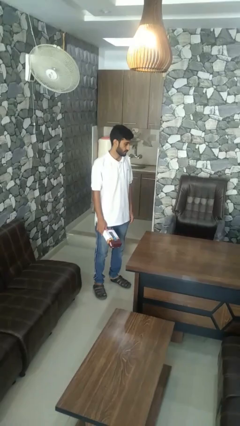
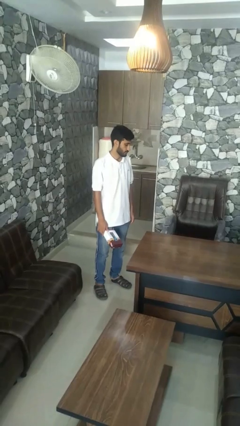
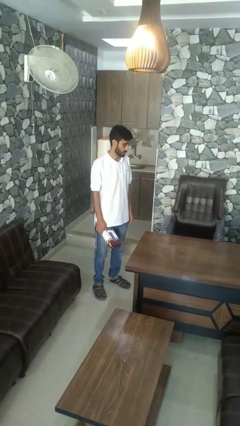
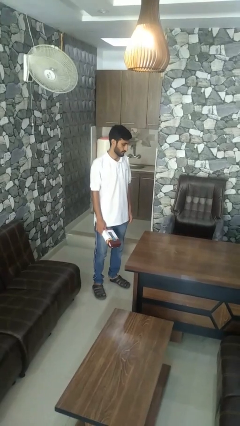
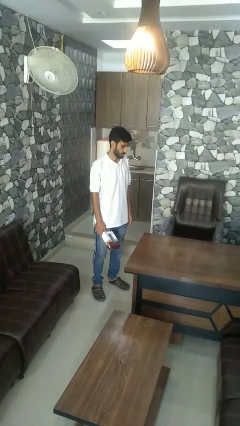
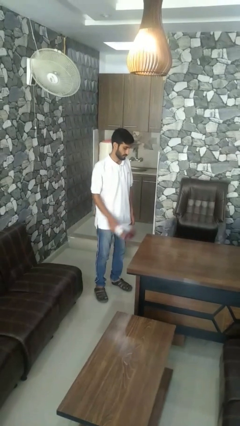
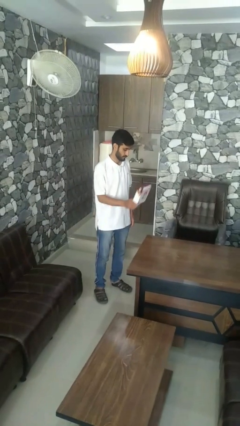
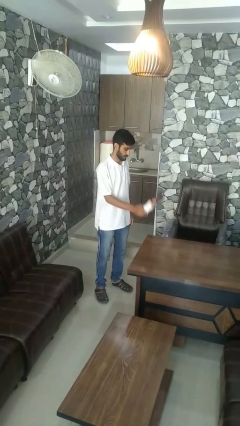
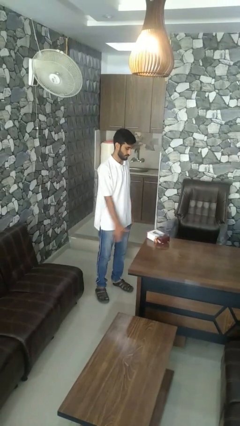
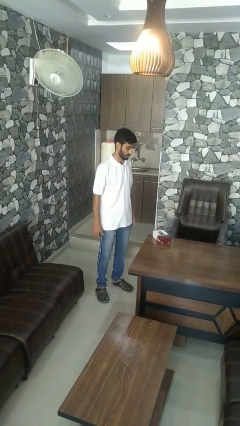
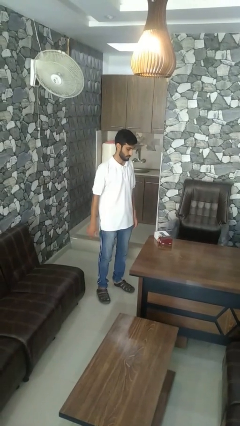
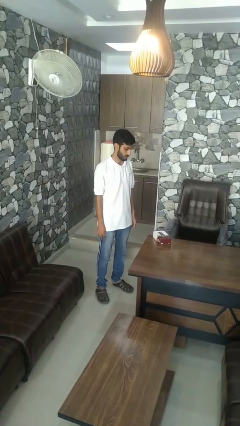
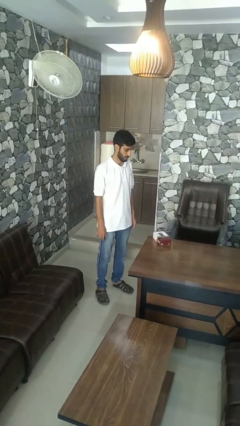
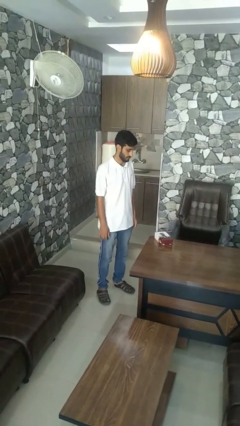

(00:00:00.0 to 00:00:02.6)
person throws object on table

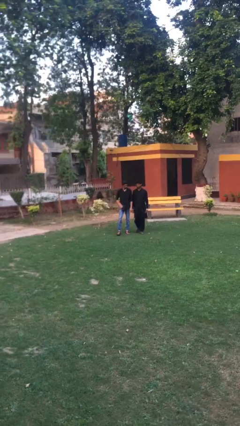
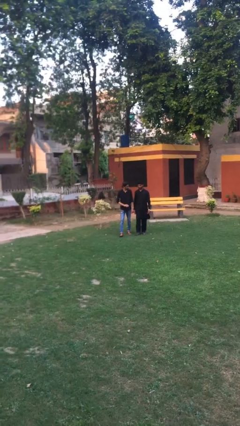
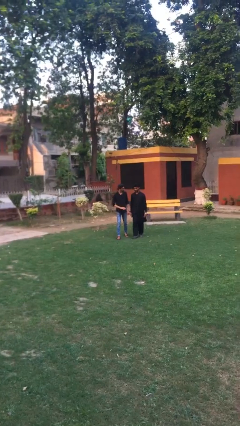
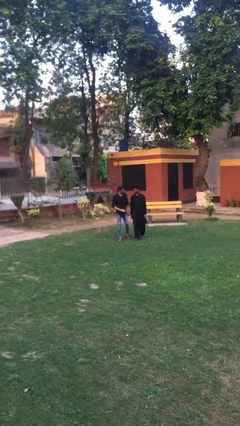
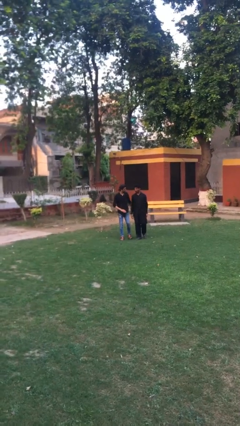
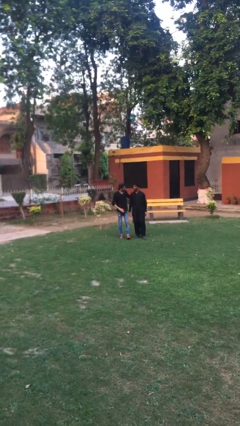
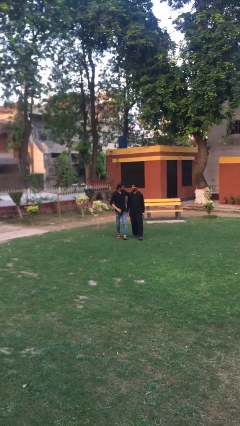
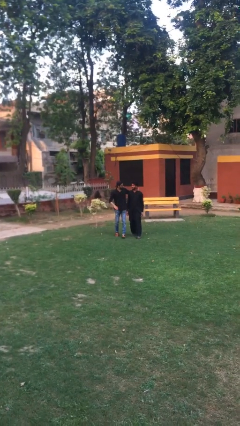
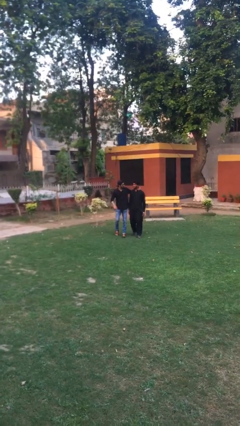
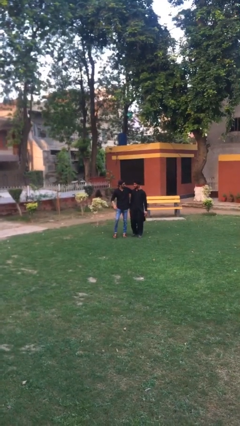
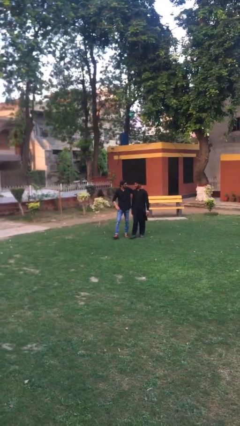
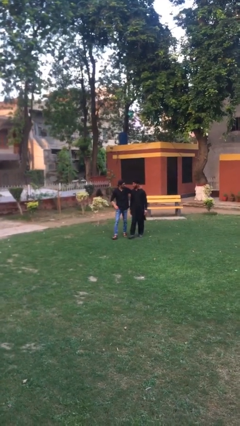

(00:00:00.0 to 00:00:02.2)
person talks to person

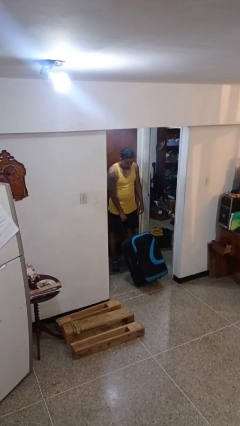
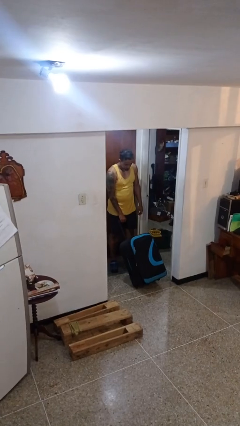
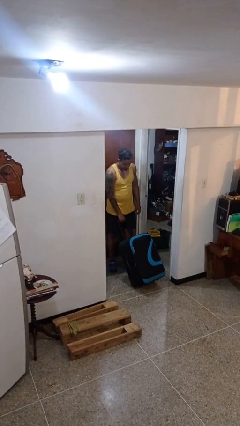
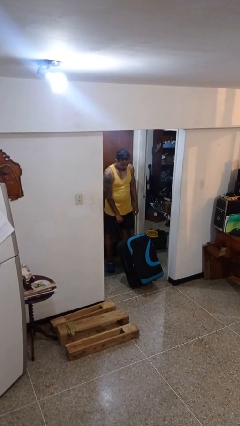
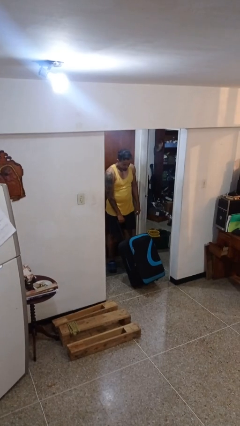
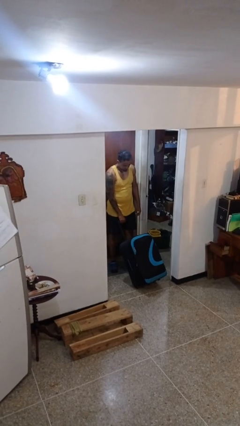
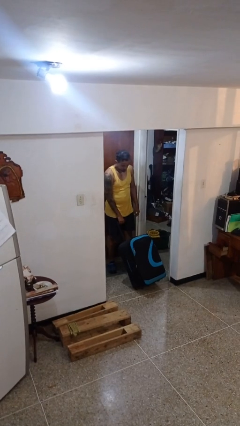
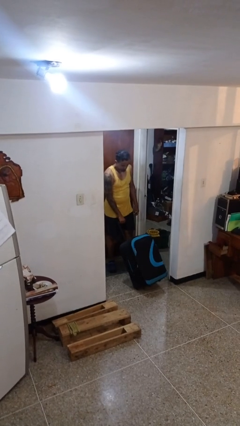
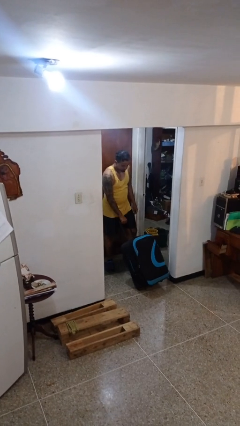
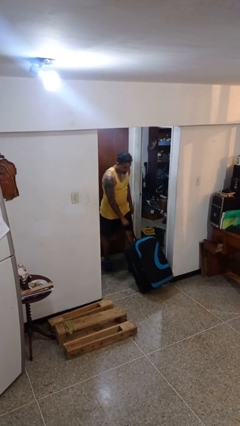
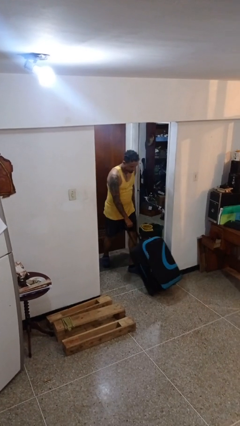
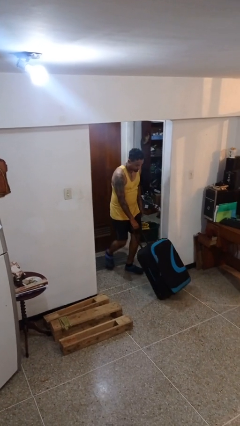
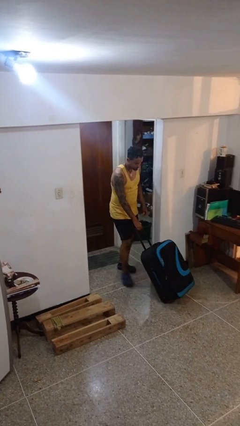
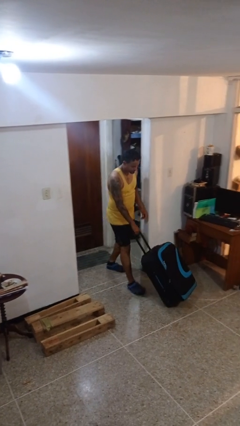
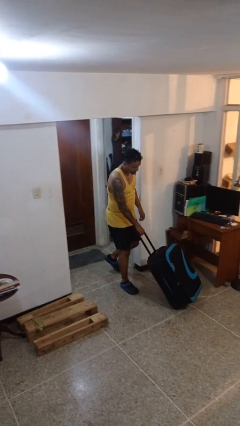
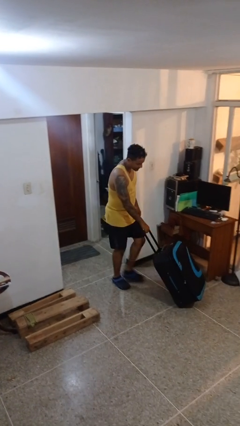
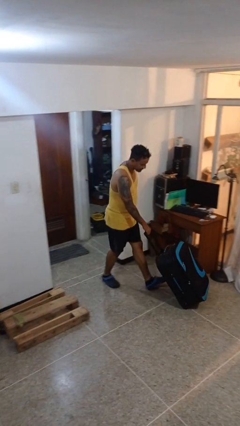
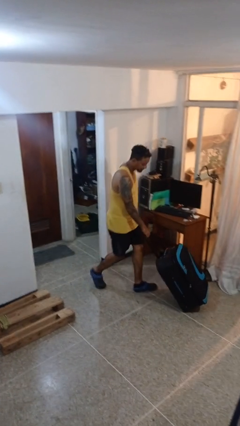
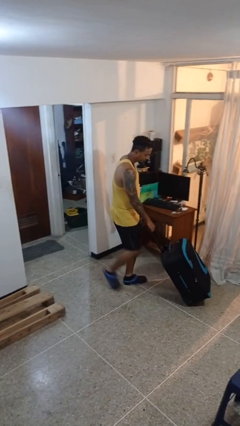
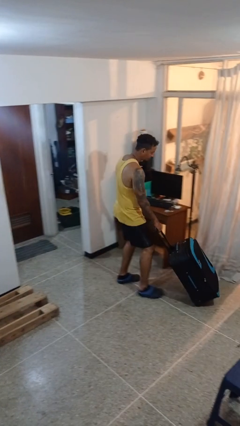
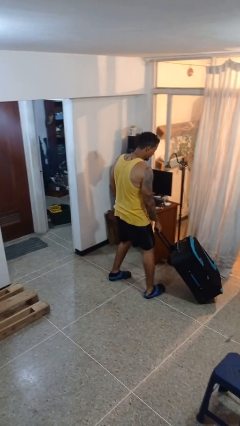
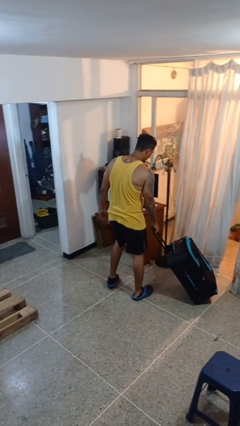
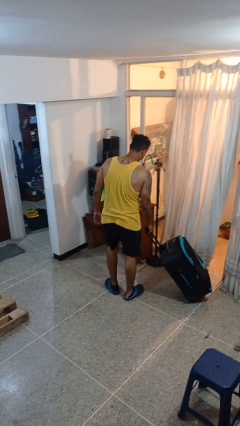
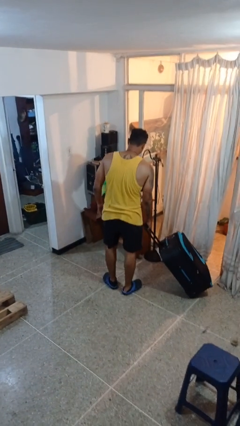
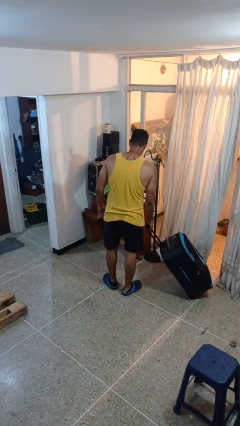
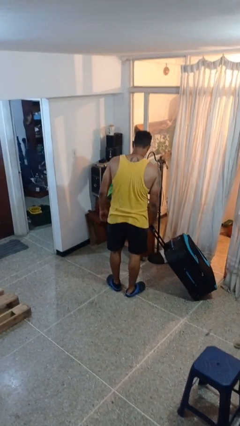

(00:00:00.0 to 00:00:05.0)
person pushes wheeled cart

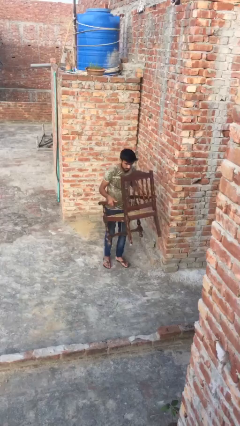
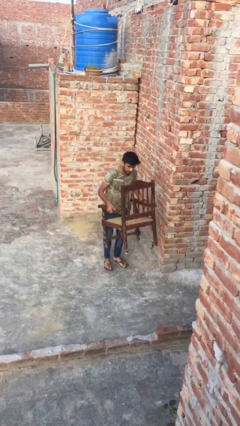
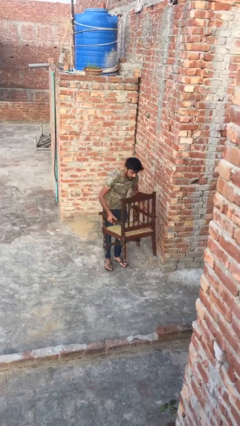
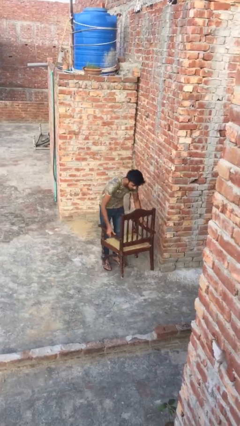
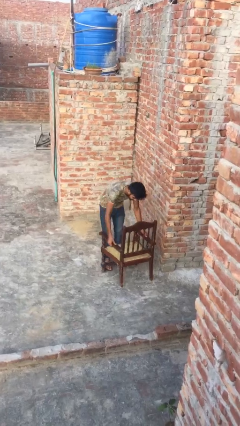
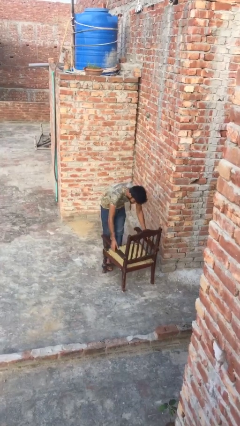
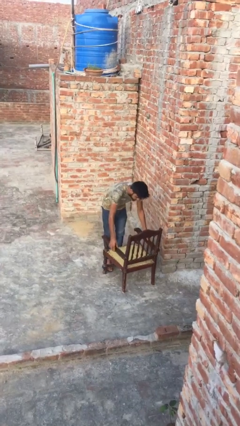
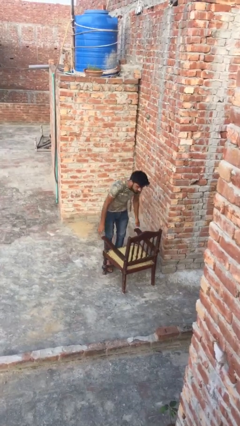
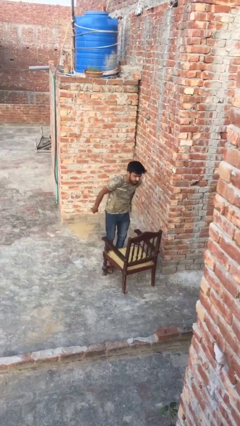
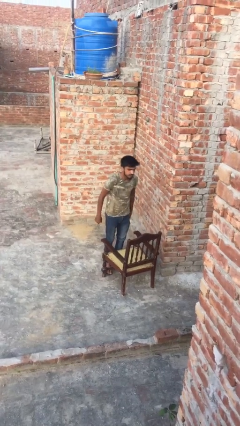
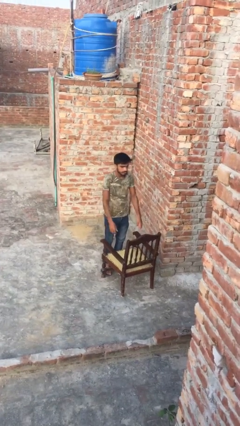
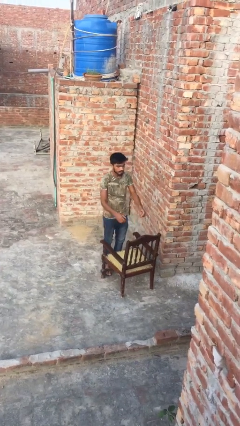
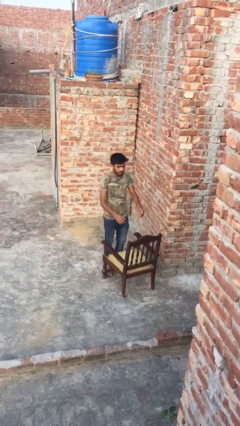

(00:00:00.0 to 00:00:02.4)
person puts down object on floor

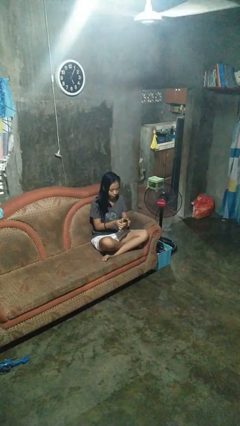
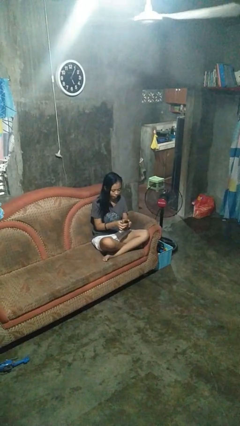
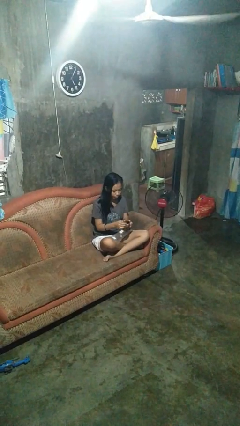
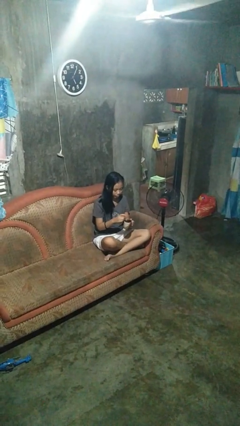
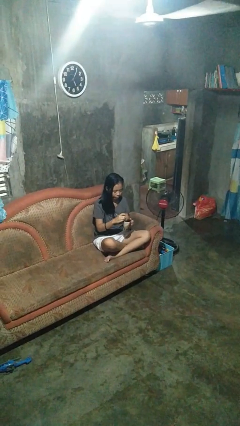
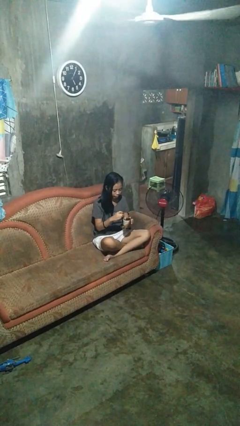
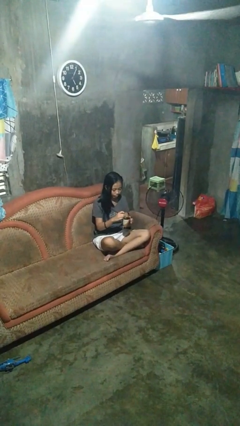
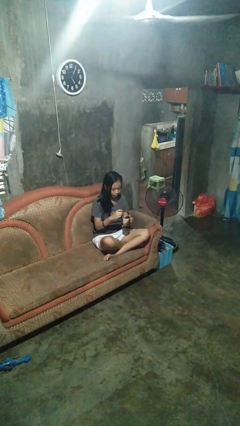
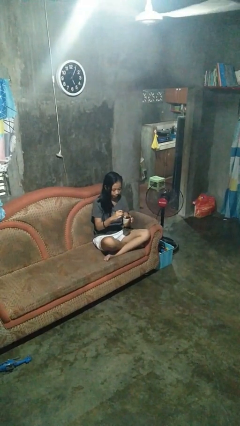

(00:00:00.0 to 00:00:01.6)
person stirs mug

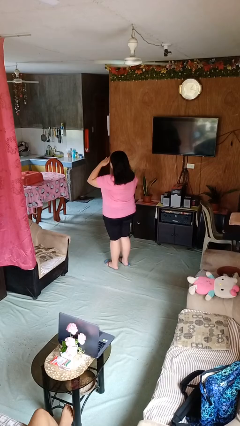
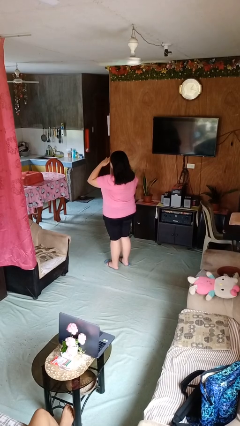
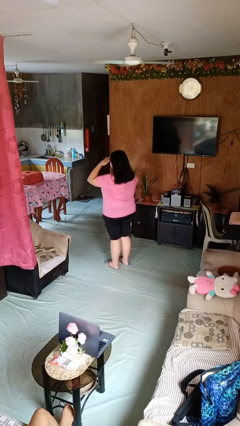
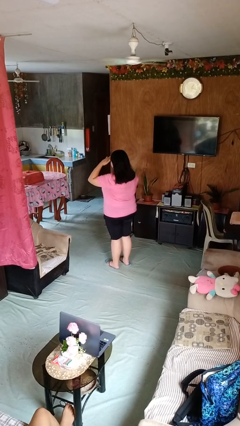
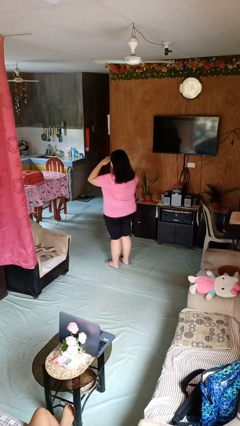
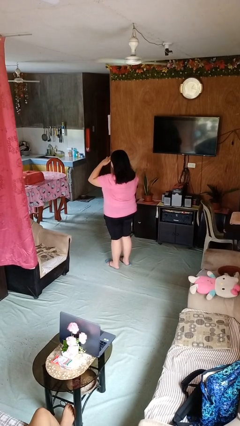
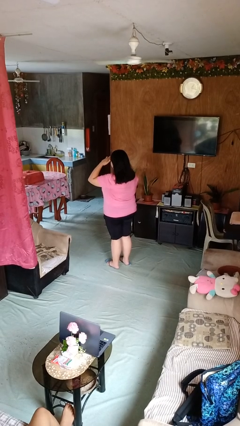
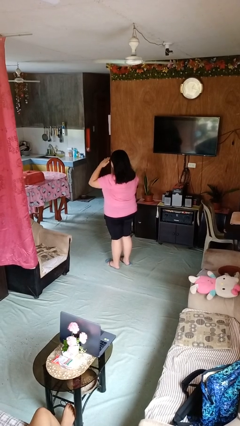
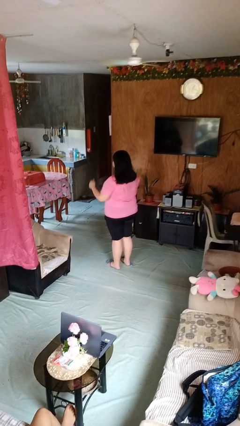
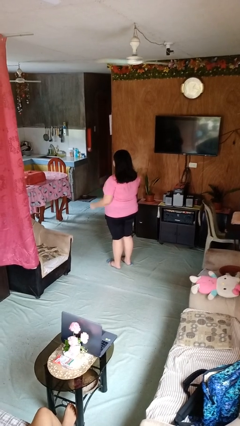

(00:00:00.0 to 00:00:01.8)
person salutes

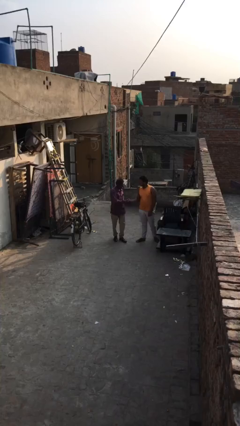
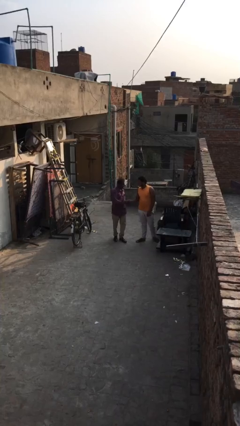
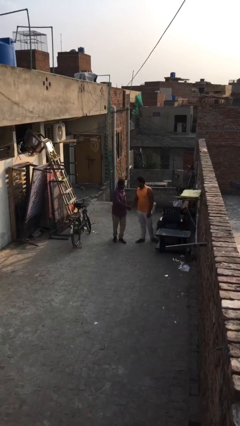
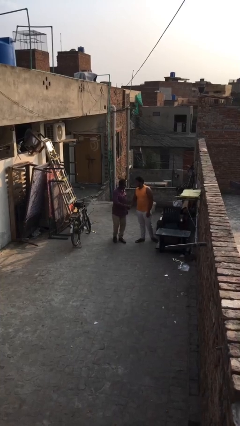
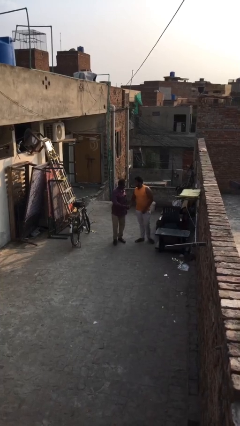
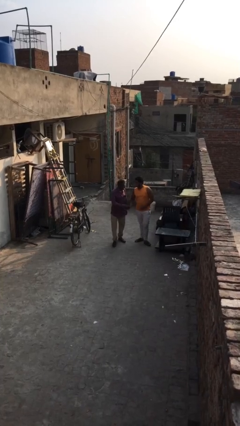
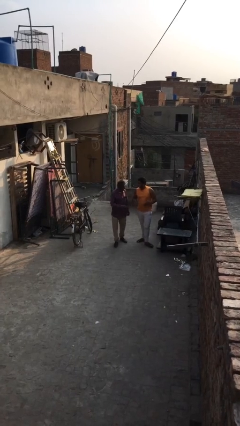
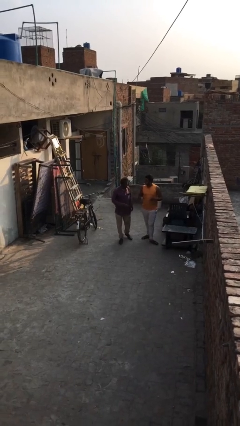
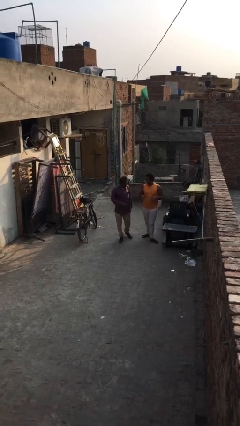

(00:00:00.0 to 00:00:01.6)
person shakes hand
